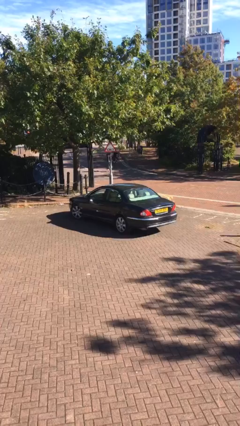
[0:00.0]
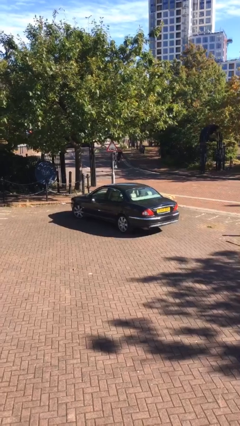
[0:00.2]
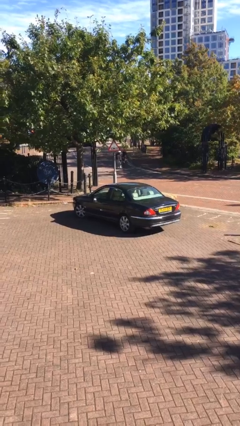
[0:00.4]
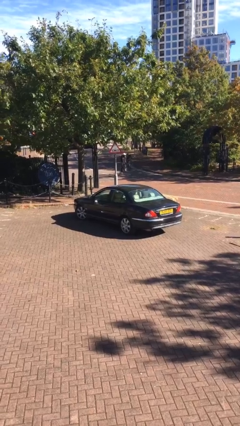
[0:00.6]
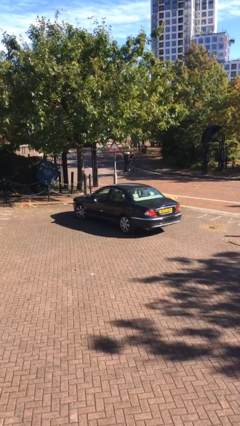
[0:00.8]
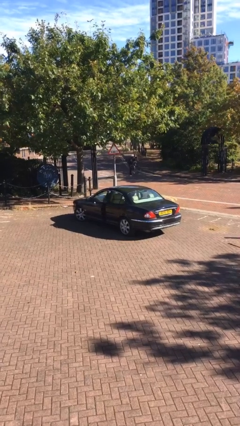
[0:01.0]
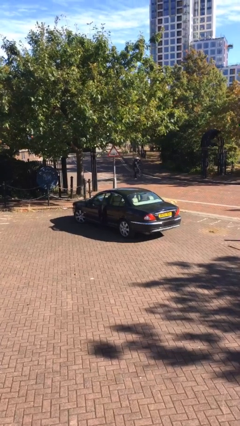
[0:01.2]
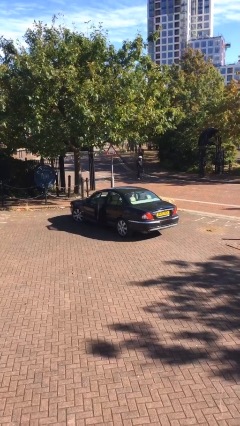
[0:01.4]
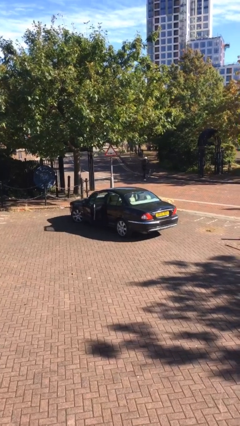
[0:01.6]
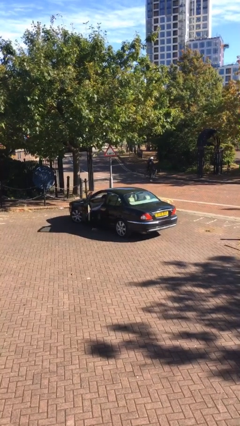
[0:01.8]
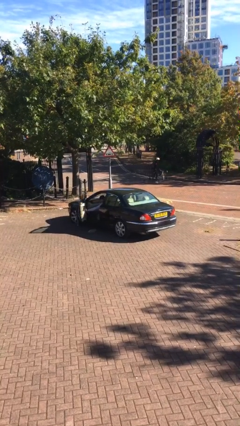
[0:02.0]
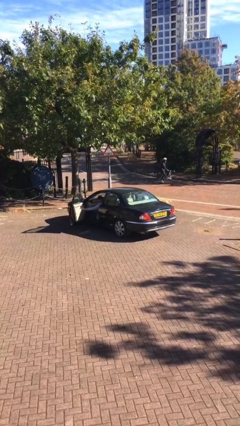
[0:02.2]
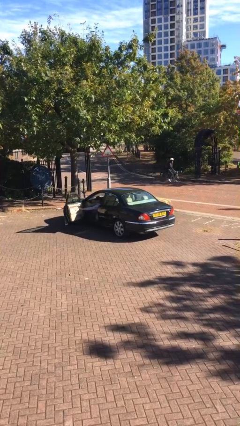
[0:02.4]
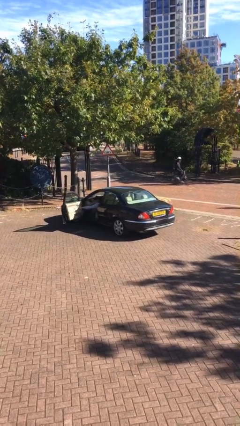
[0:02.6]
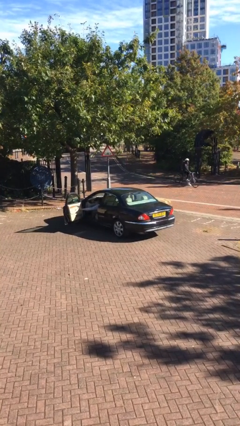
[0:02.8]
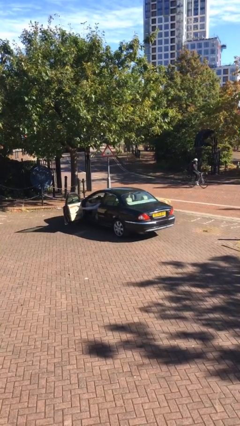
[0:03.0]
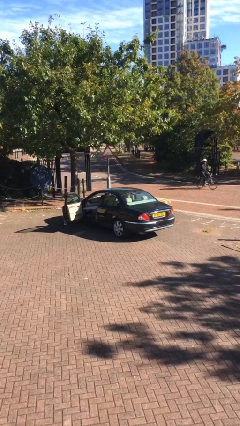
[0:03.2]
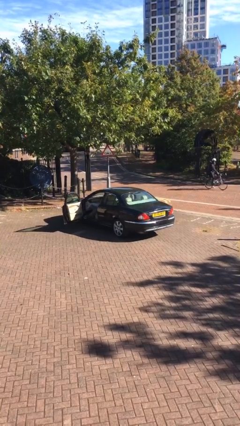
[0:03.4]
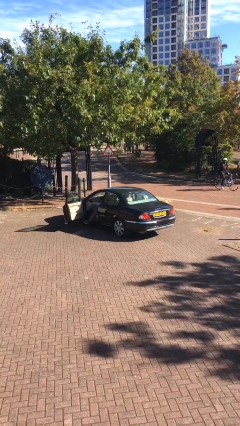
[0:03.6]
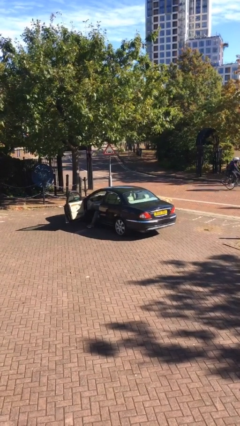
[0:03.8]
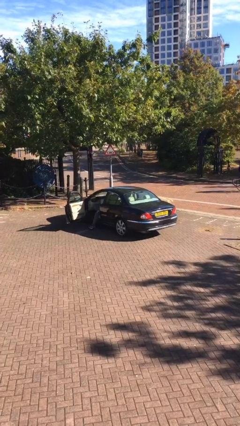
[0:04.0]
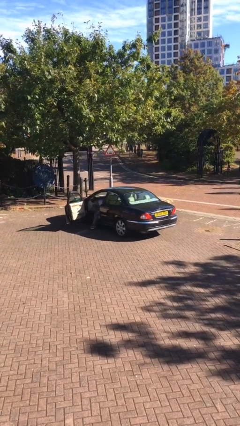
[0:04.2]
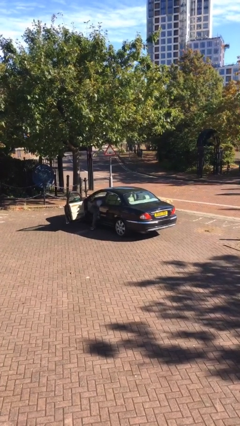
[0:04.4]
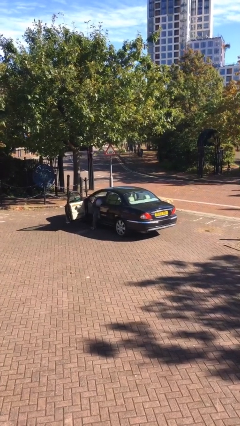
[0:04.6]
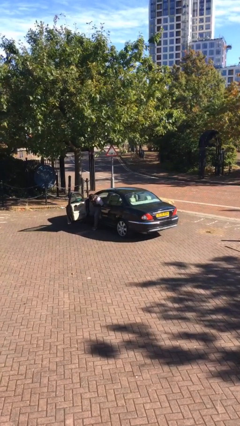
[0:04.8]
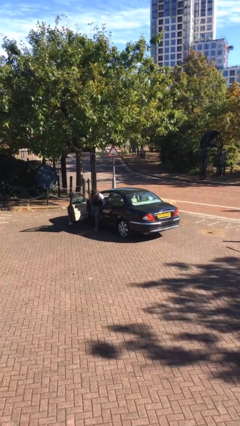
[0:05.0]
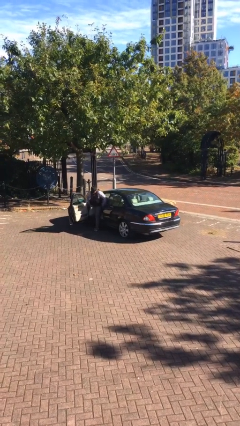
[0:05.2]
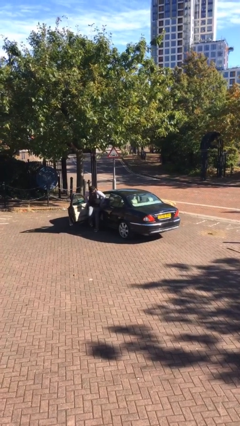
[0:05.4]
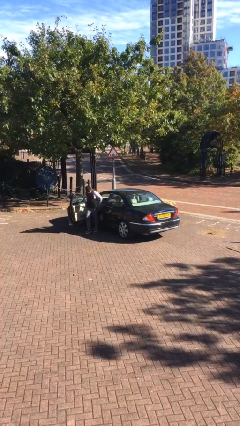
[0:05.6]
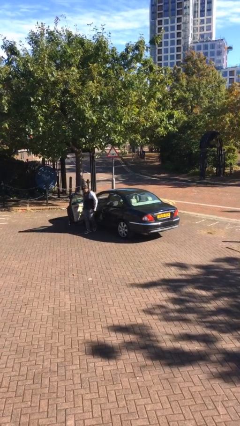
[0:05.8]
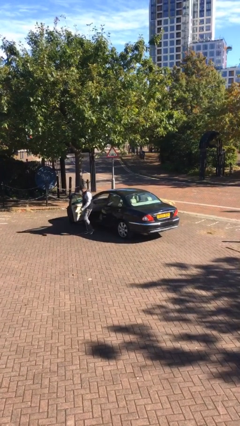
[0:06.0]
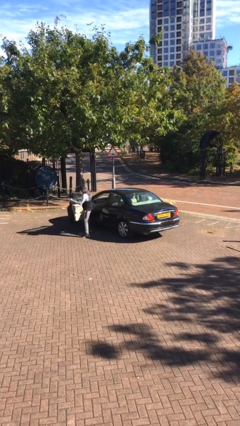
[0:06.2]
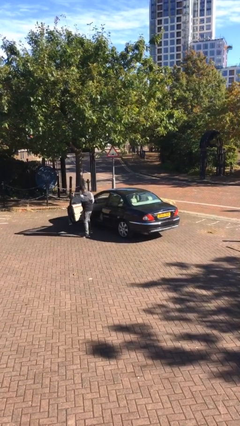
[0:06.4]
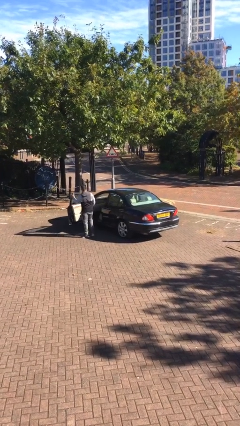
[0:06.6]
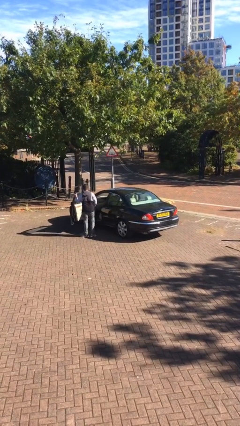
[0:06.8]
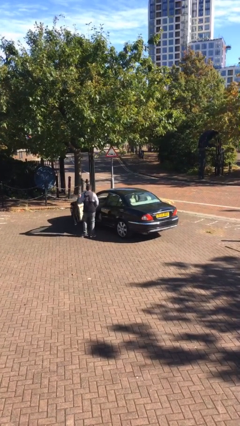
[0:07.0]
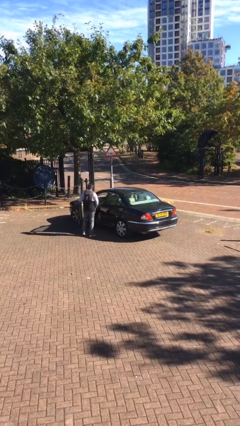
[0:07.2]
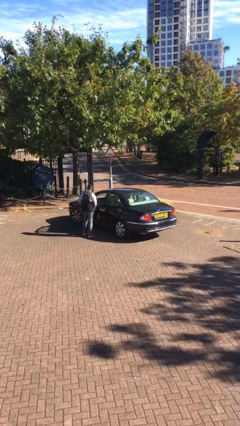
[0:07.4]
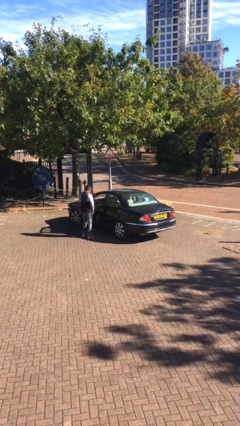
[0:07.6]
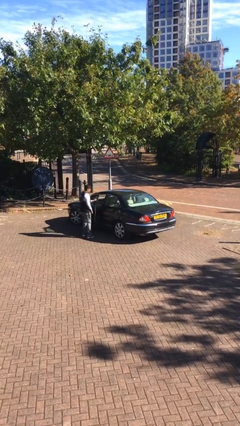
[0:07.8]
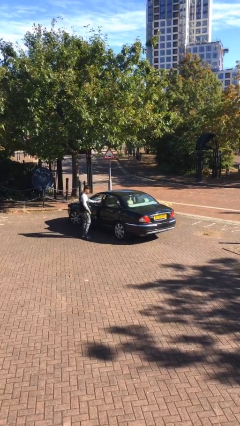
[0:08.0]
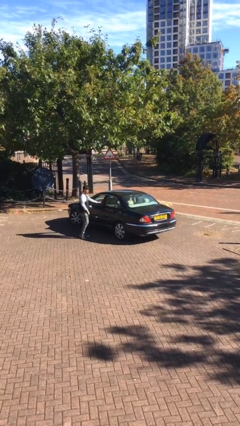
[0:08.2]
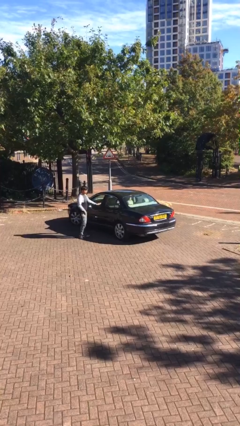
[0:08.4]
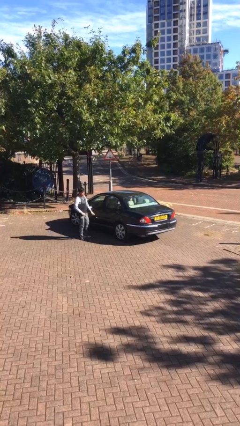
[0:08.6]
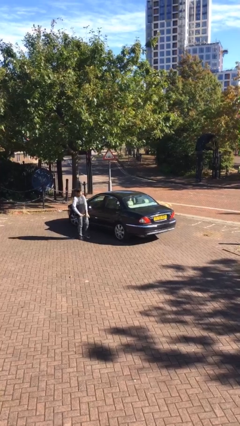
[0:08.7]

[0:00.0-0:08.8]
car drops off person

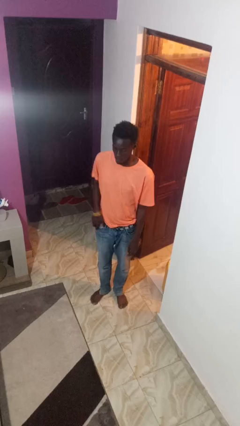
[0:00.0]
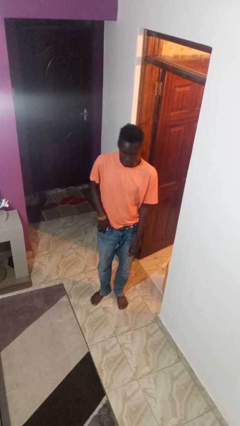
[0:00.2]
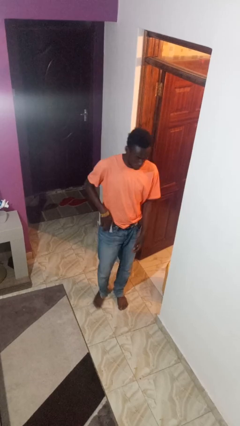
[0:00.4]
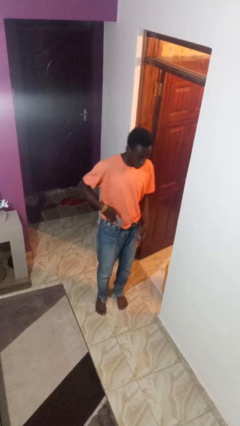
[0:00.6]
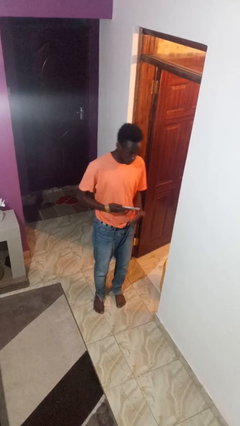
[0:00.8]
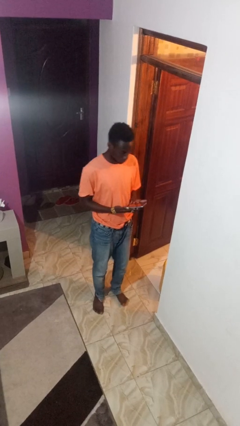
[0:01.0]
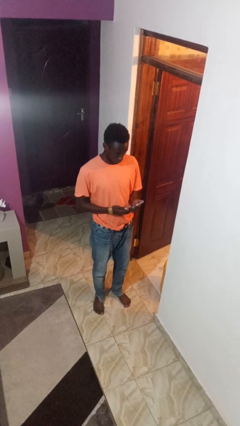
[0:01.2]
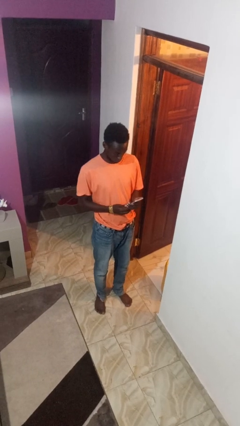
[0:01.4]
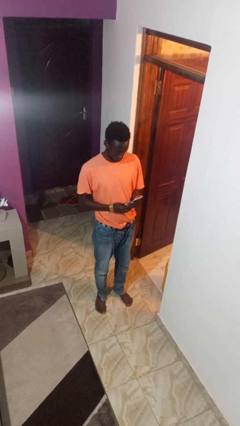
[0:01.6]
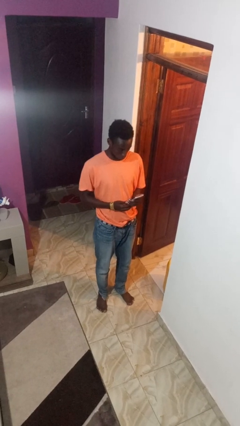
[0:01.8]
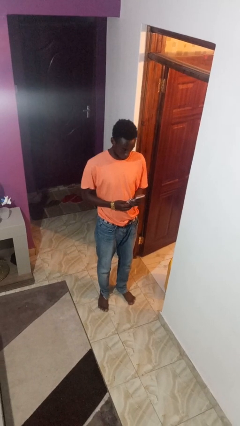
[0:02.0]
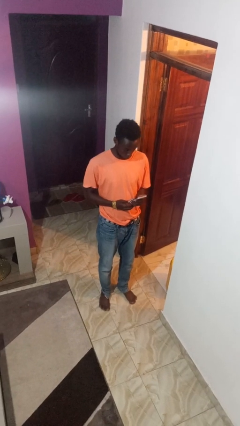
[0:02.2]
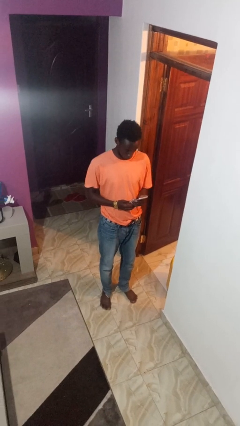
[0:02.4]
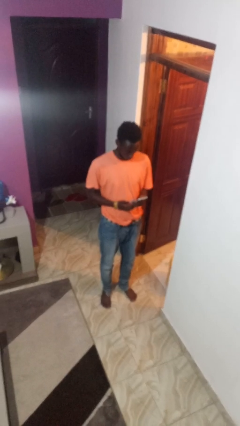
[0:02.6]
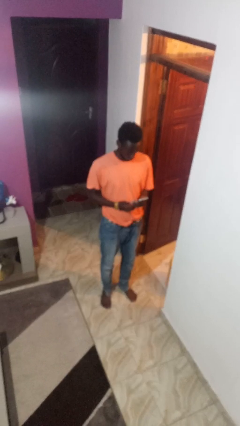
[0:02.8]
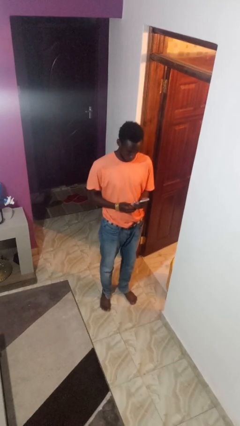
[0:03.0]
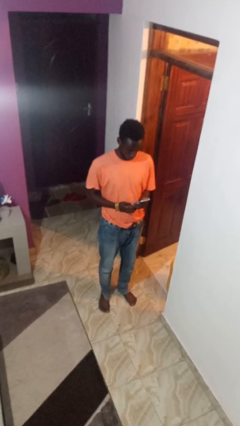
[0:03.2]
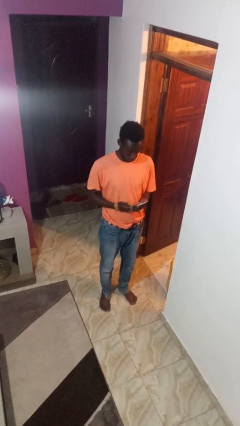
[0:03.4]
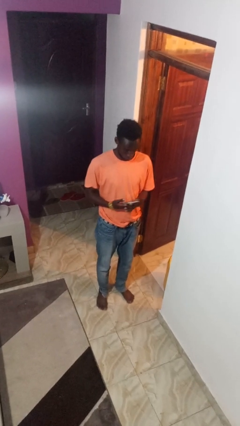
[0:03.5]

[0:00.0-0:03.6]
person takes phone from pocket

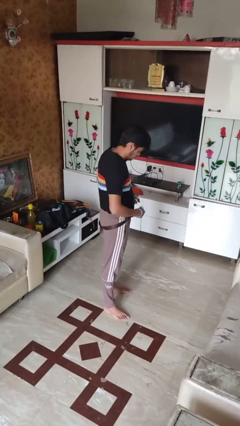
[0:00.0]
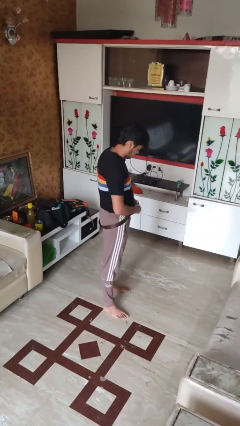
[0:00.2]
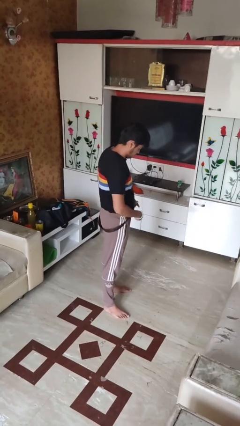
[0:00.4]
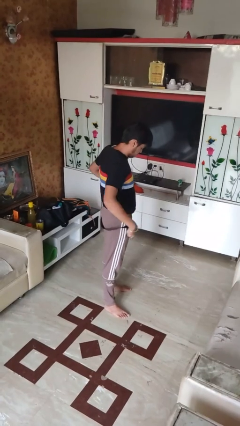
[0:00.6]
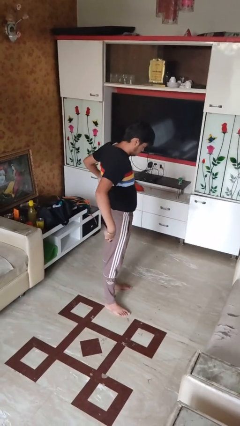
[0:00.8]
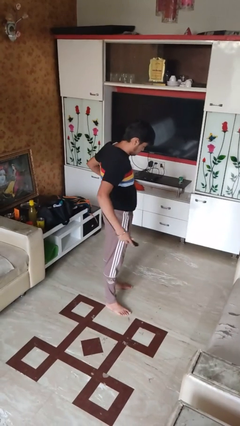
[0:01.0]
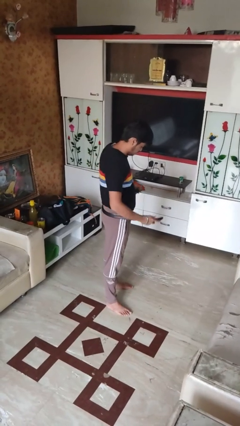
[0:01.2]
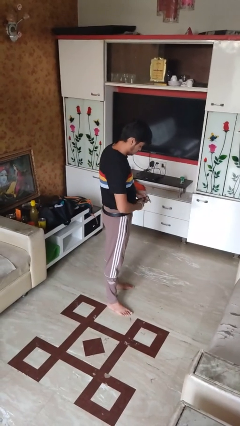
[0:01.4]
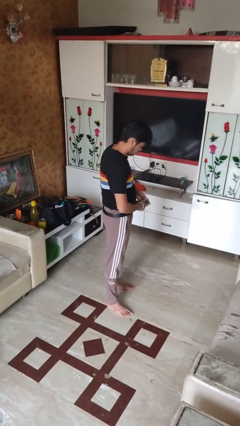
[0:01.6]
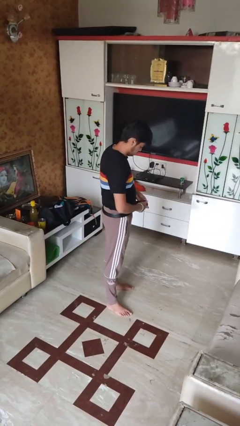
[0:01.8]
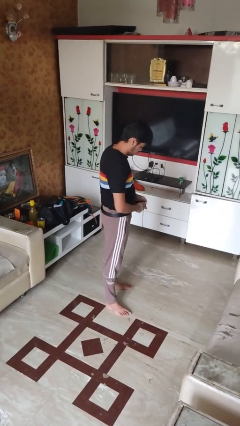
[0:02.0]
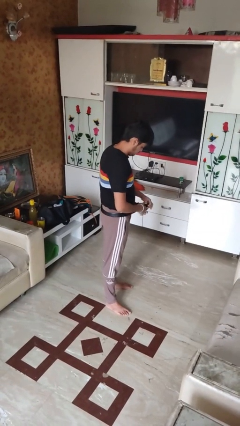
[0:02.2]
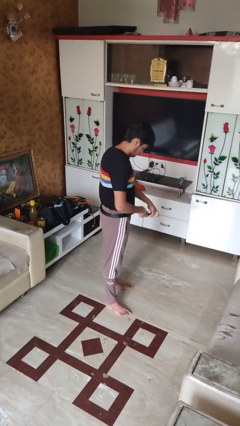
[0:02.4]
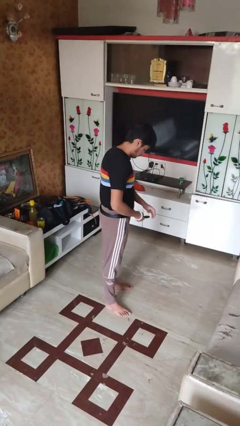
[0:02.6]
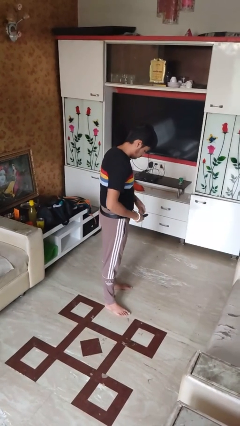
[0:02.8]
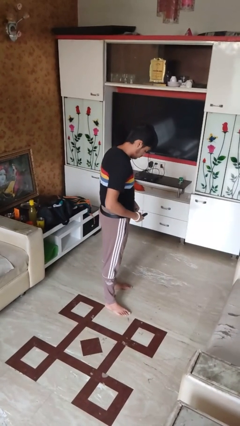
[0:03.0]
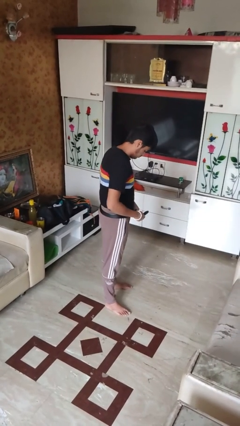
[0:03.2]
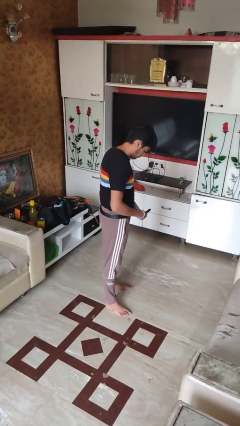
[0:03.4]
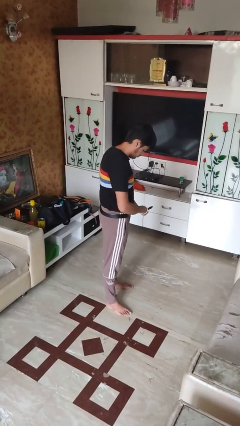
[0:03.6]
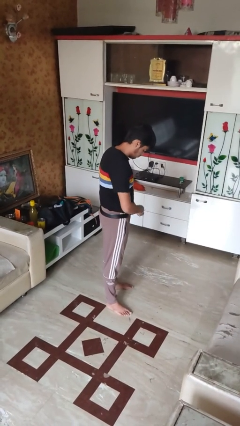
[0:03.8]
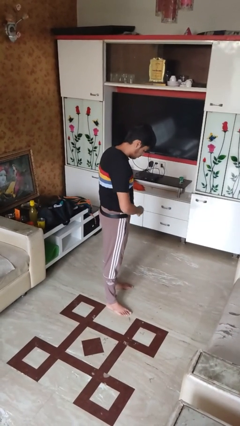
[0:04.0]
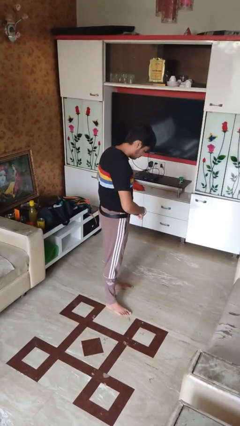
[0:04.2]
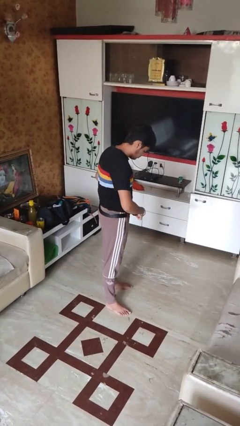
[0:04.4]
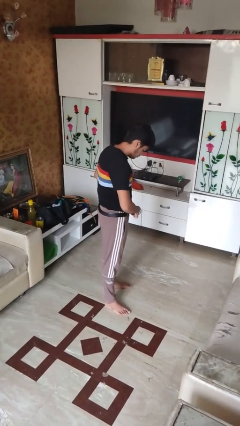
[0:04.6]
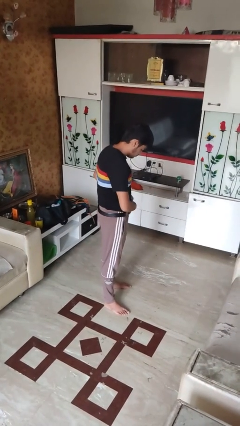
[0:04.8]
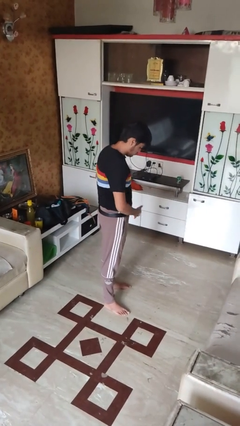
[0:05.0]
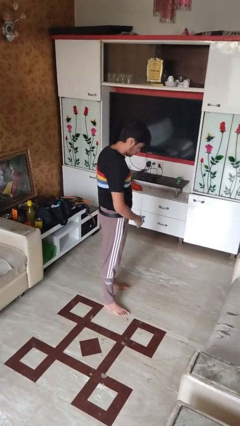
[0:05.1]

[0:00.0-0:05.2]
person puts on belt
